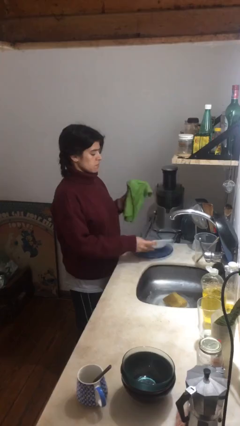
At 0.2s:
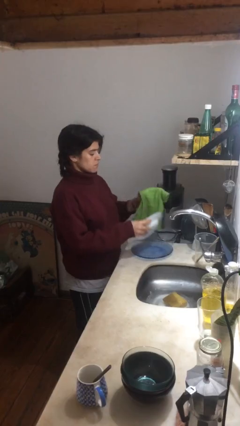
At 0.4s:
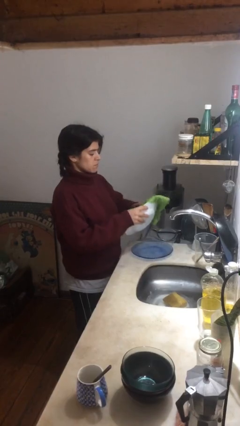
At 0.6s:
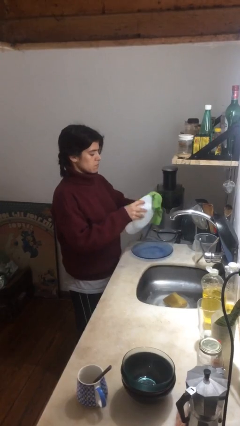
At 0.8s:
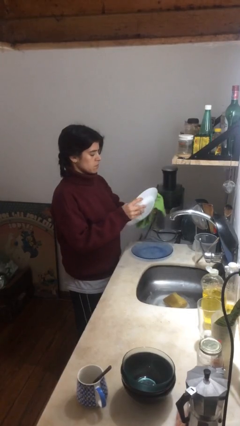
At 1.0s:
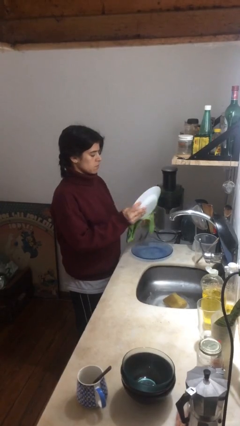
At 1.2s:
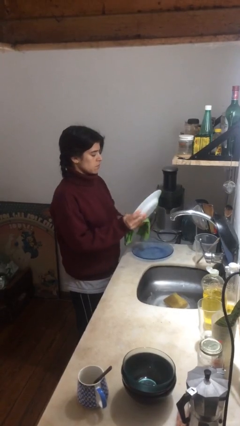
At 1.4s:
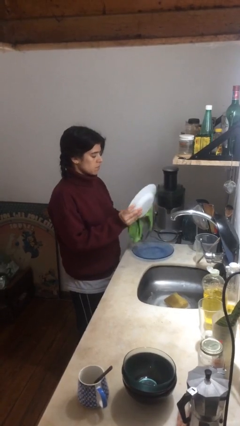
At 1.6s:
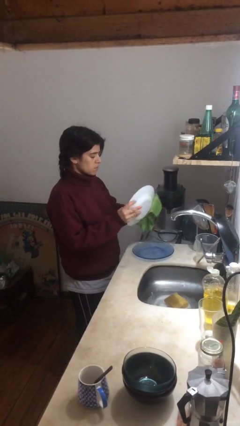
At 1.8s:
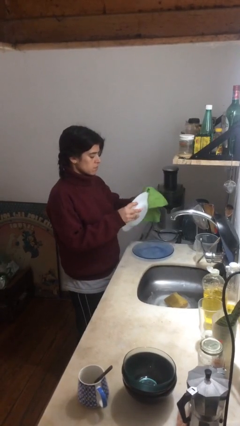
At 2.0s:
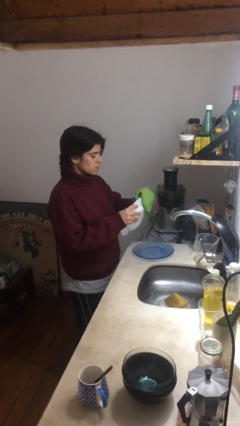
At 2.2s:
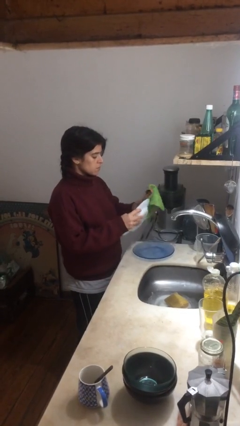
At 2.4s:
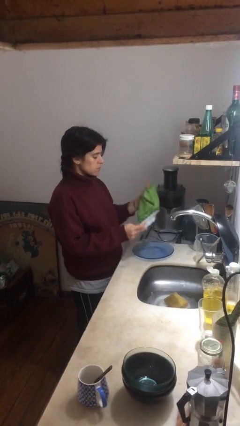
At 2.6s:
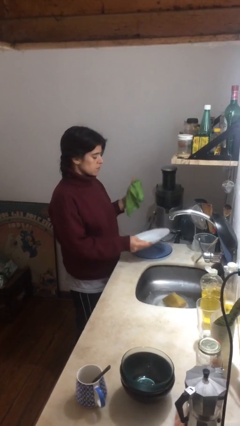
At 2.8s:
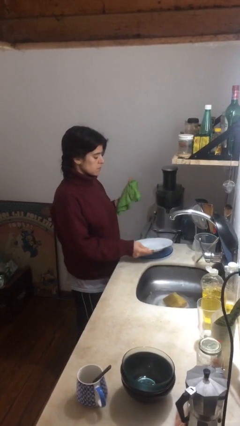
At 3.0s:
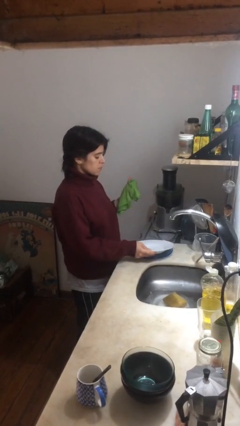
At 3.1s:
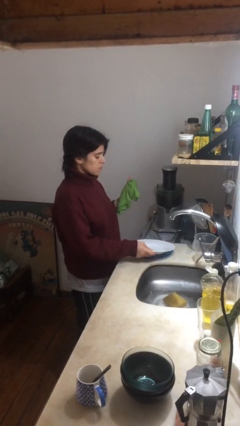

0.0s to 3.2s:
person dries dish

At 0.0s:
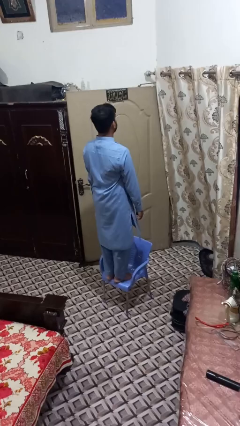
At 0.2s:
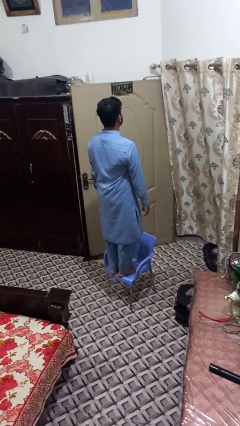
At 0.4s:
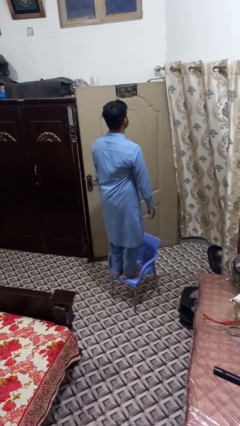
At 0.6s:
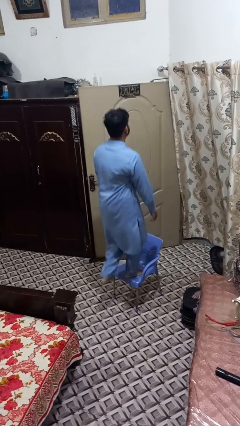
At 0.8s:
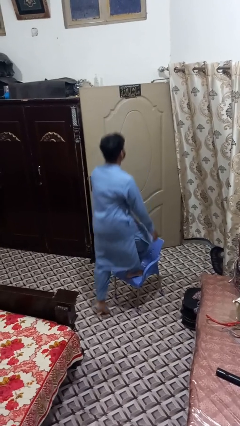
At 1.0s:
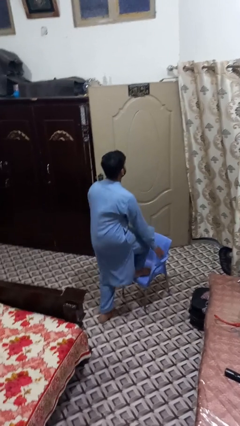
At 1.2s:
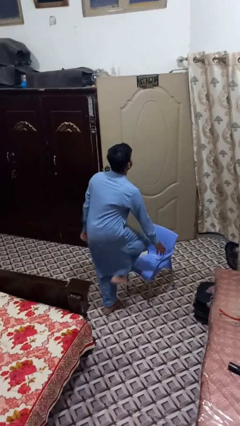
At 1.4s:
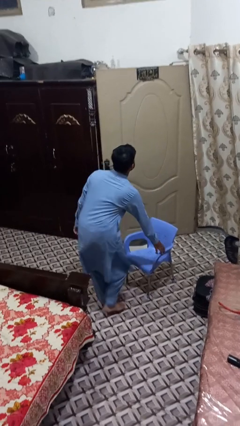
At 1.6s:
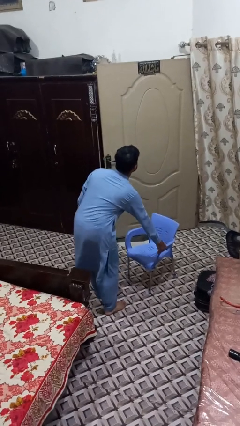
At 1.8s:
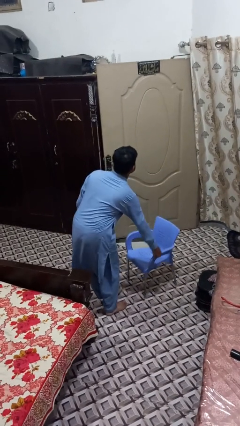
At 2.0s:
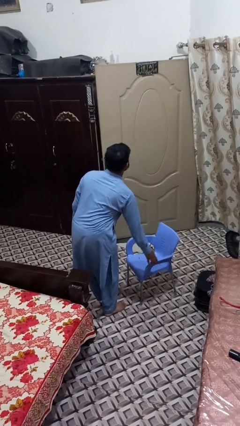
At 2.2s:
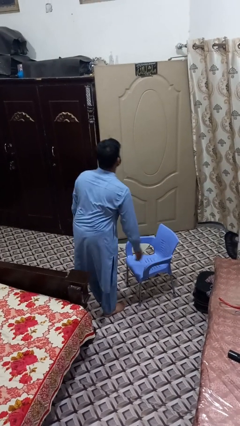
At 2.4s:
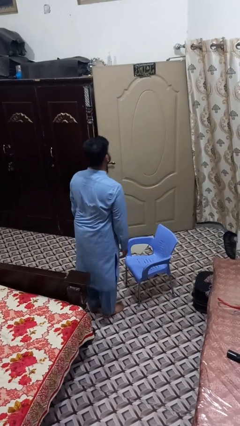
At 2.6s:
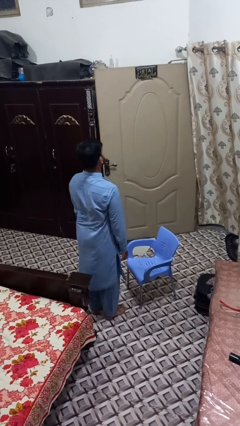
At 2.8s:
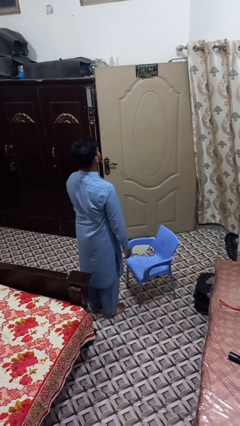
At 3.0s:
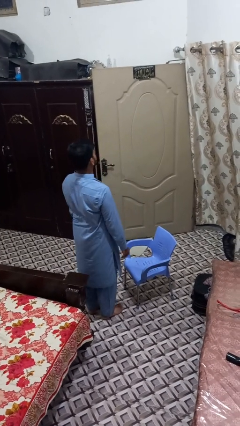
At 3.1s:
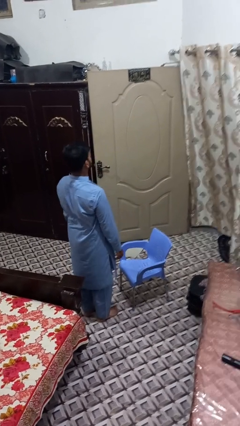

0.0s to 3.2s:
person climbs off chair

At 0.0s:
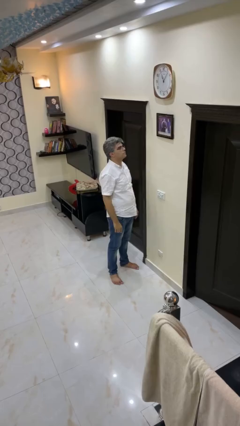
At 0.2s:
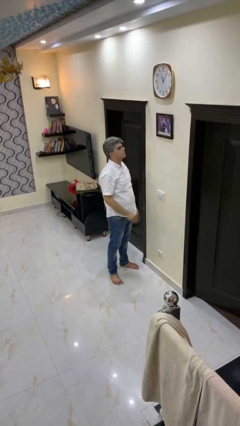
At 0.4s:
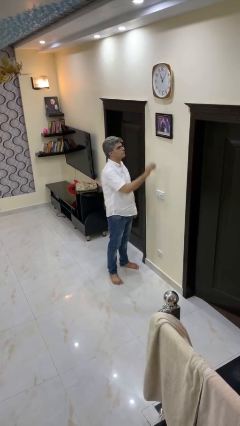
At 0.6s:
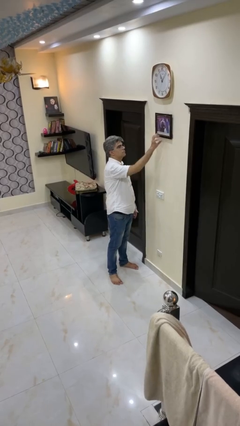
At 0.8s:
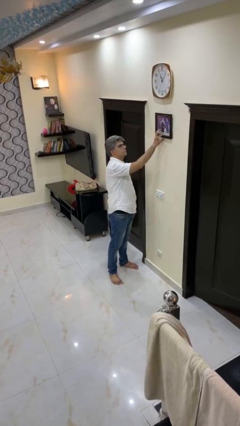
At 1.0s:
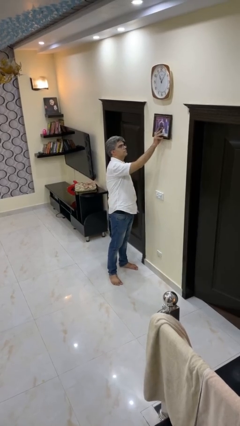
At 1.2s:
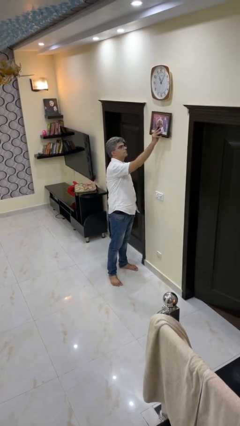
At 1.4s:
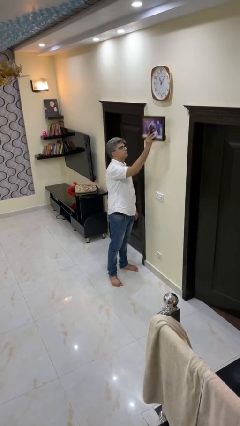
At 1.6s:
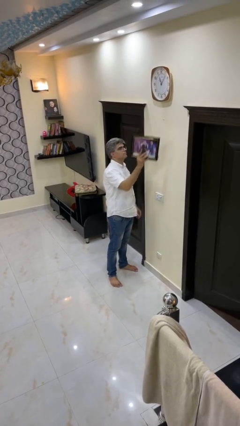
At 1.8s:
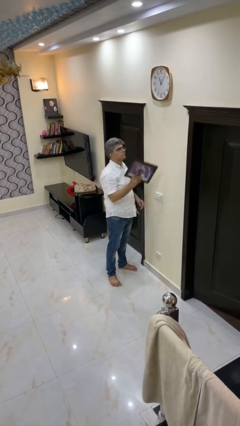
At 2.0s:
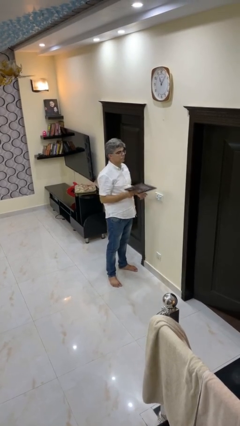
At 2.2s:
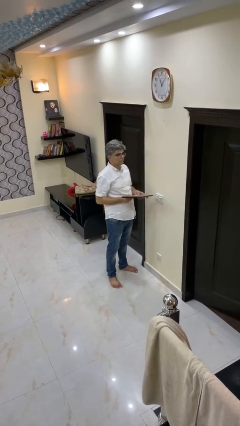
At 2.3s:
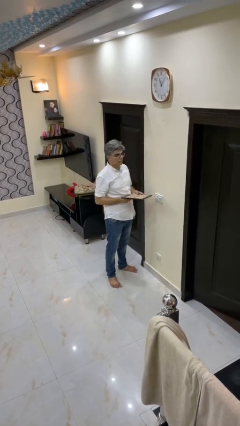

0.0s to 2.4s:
person takes down picture frame

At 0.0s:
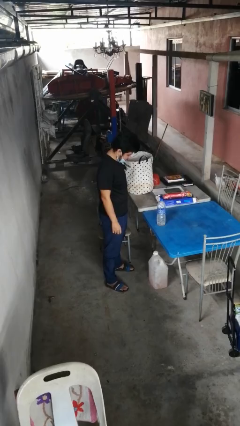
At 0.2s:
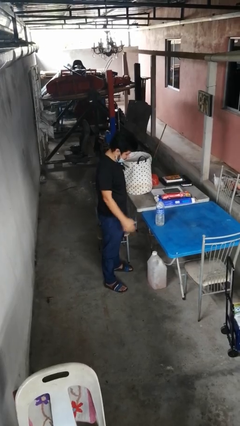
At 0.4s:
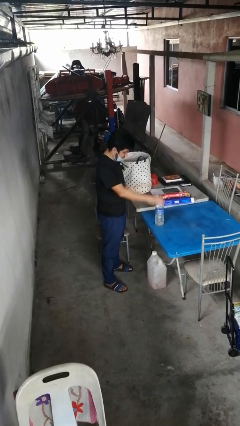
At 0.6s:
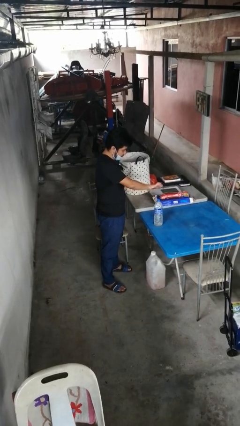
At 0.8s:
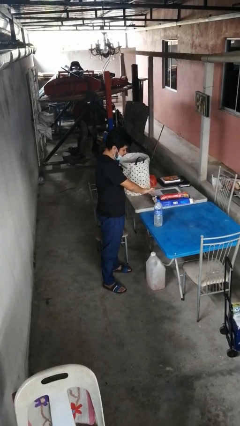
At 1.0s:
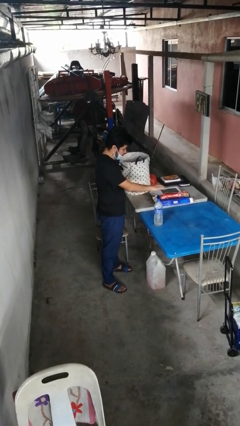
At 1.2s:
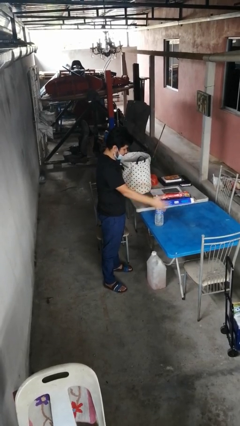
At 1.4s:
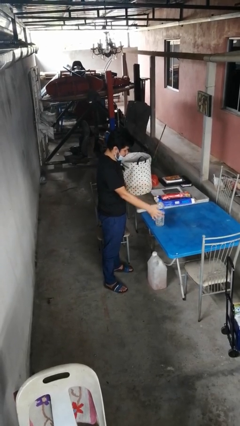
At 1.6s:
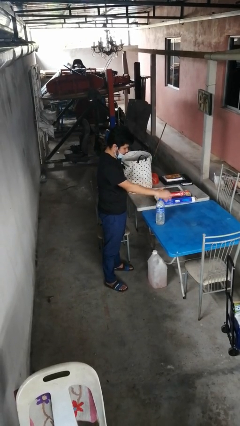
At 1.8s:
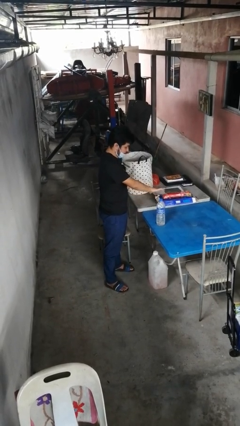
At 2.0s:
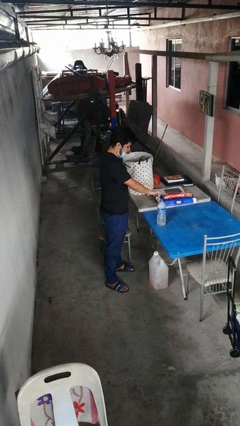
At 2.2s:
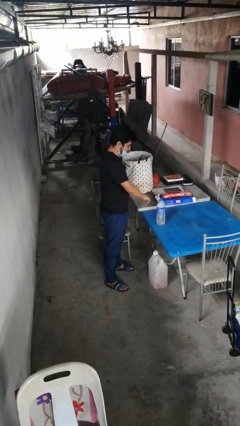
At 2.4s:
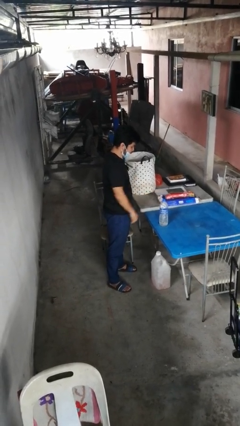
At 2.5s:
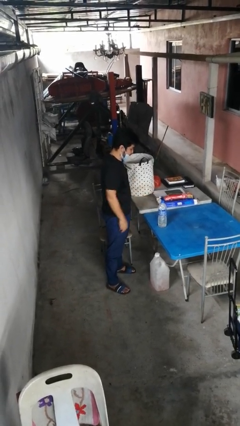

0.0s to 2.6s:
person waves hand over object

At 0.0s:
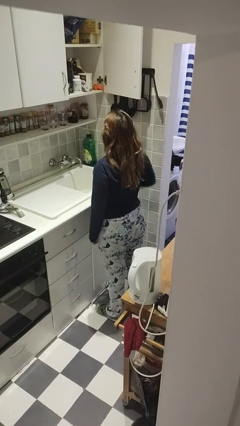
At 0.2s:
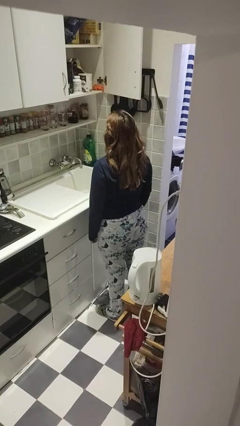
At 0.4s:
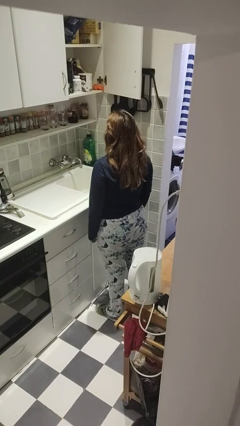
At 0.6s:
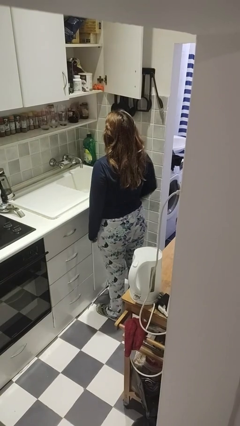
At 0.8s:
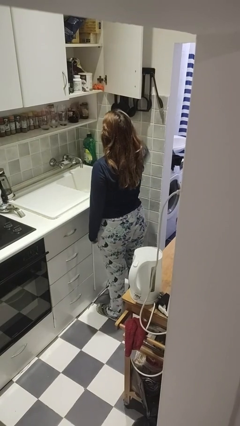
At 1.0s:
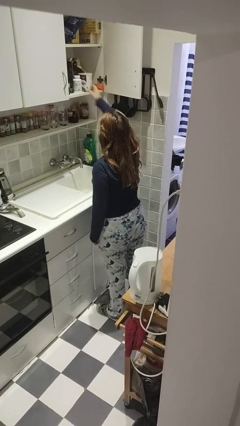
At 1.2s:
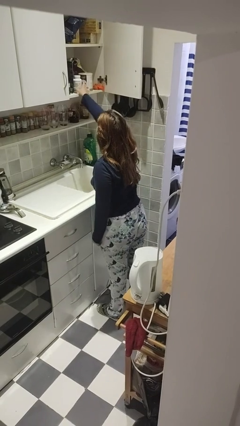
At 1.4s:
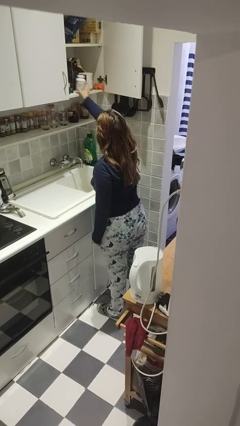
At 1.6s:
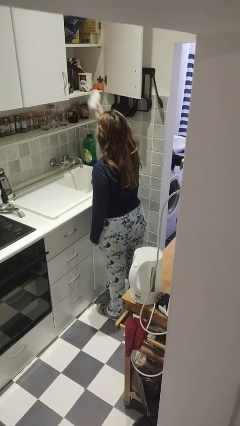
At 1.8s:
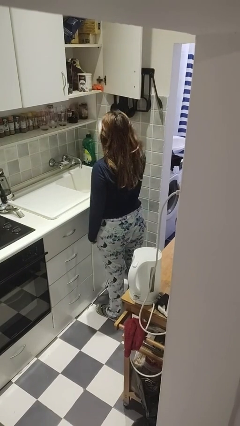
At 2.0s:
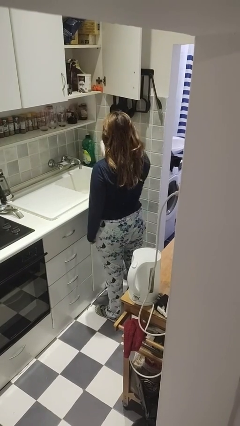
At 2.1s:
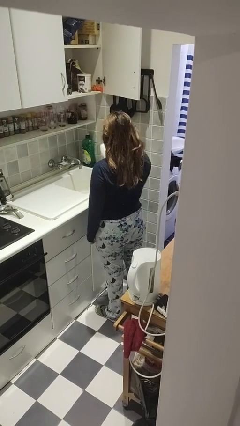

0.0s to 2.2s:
person takes object from cabinet

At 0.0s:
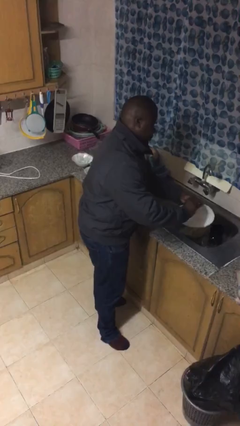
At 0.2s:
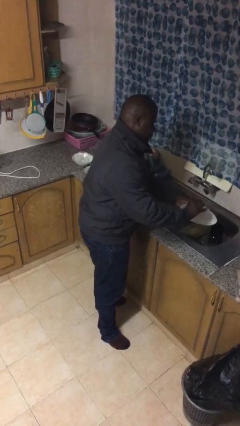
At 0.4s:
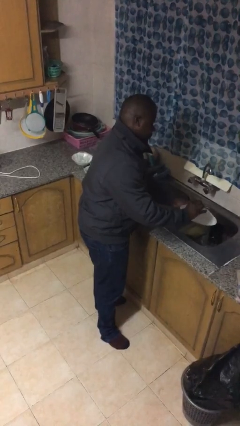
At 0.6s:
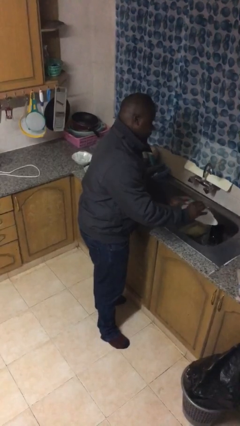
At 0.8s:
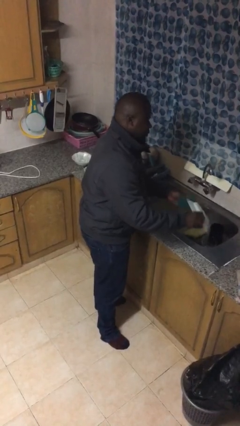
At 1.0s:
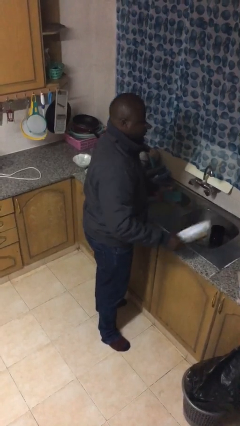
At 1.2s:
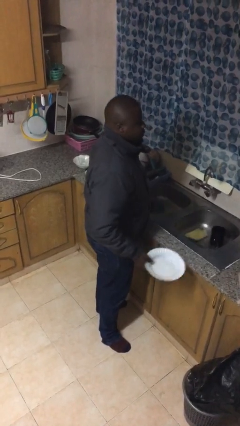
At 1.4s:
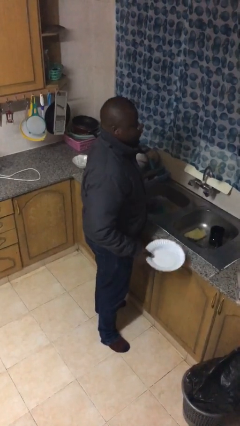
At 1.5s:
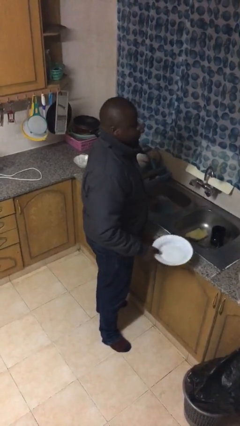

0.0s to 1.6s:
person washes dish

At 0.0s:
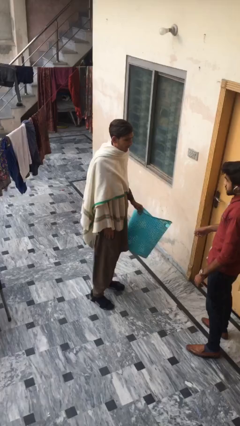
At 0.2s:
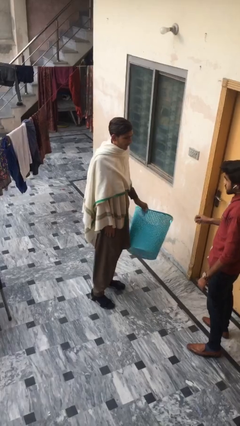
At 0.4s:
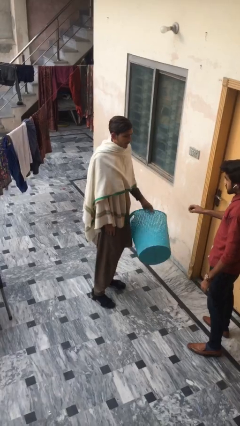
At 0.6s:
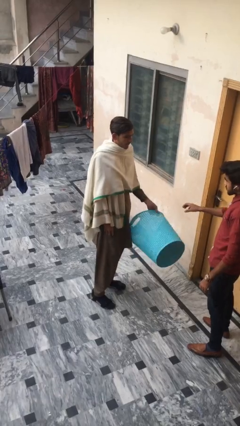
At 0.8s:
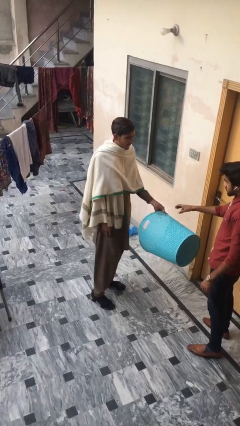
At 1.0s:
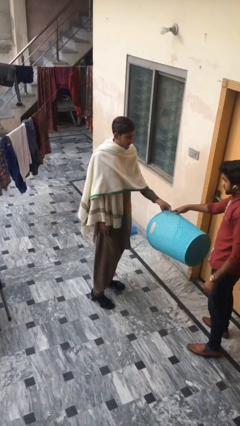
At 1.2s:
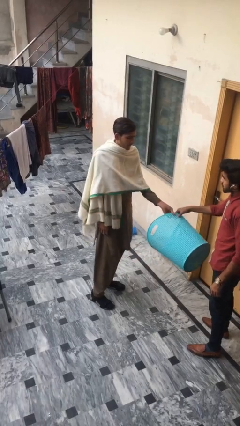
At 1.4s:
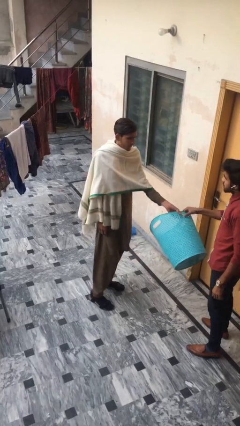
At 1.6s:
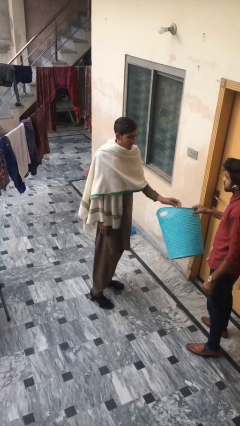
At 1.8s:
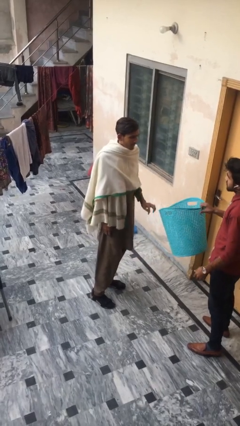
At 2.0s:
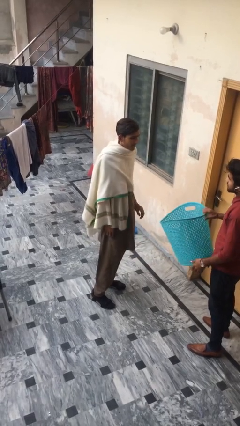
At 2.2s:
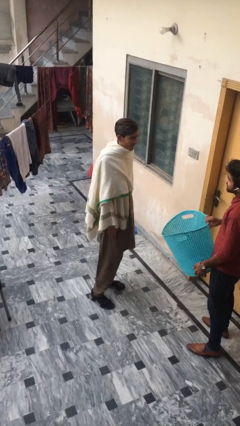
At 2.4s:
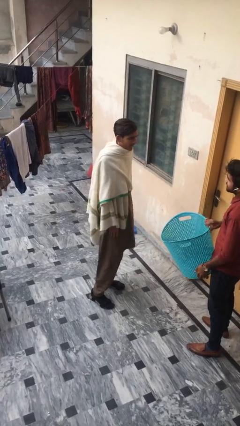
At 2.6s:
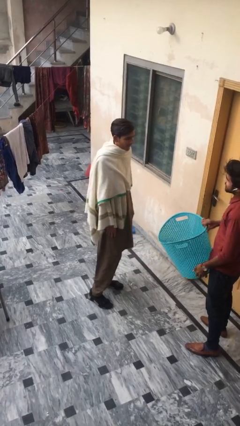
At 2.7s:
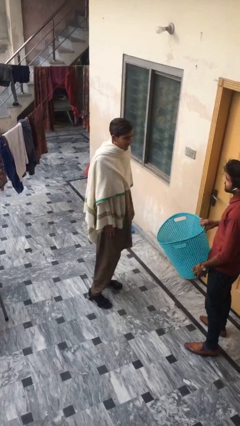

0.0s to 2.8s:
person transfers object to person
